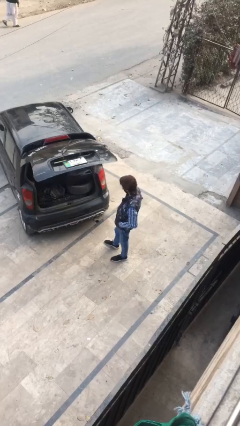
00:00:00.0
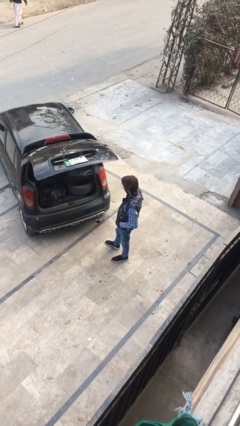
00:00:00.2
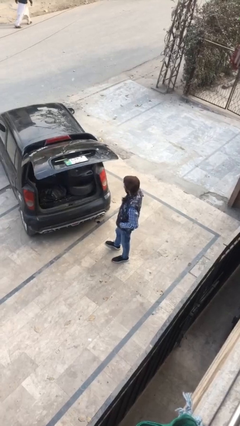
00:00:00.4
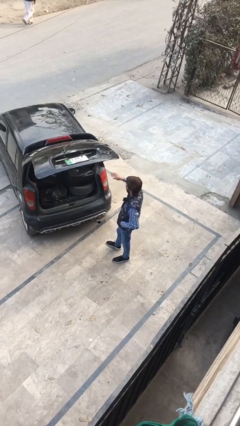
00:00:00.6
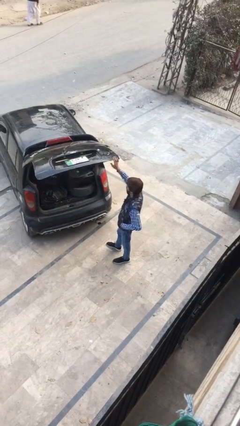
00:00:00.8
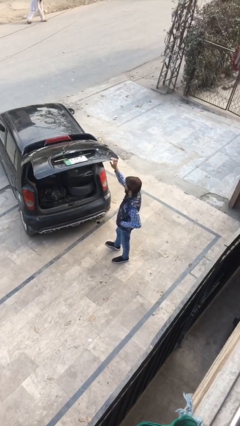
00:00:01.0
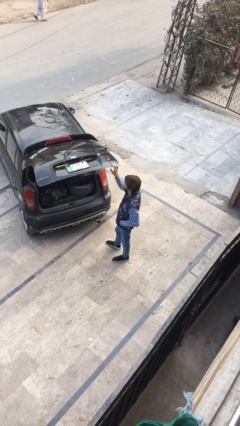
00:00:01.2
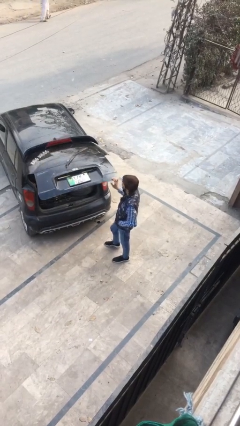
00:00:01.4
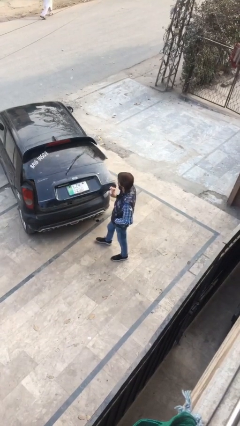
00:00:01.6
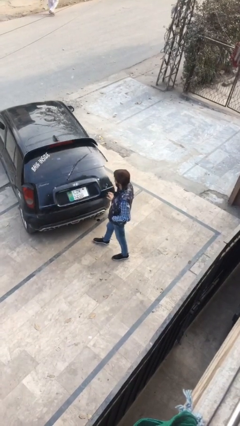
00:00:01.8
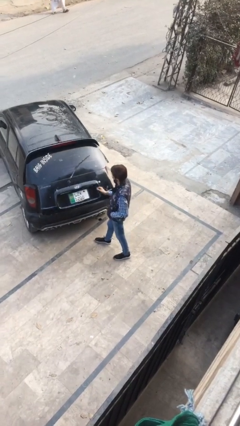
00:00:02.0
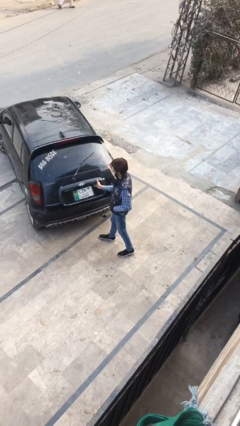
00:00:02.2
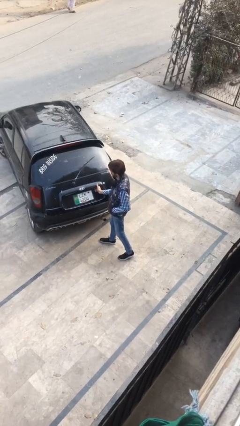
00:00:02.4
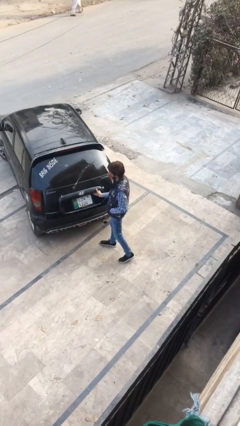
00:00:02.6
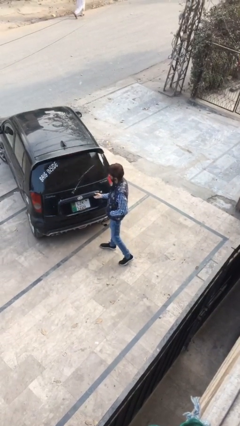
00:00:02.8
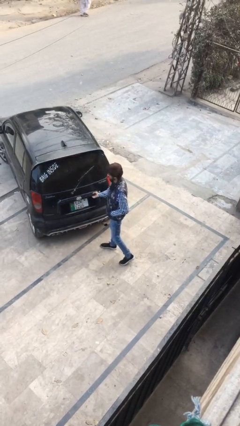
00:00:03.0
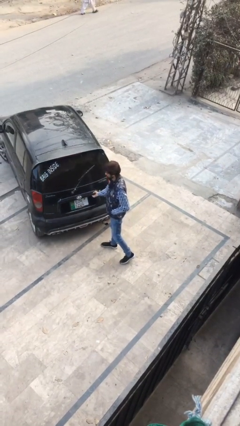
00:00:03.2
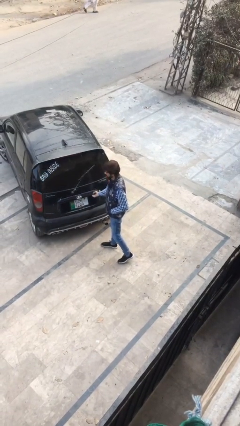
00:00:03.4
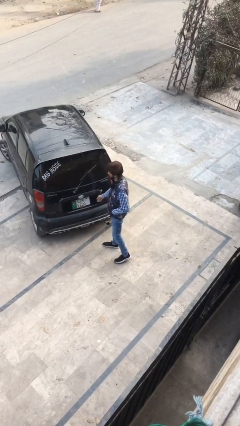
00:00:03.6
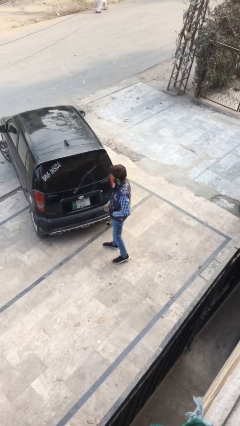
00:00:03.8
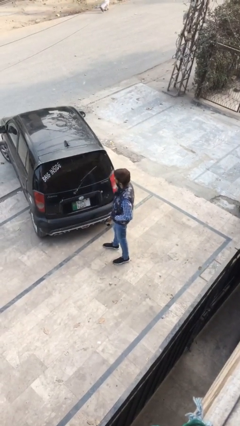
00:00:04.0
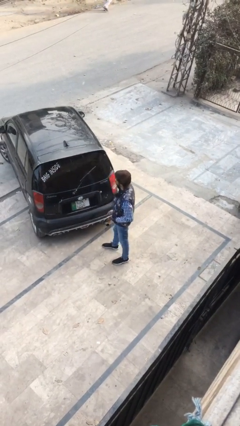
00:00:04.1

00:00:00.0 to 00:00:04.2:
person closes car trunk

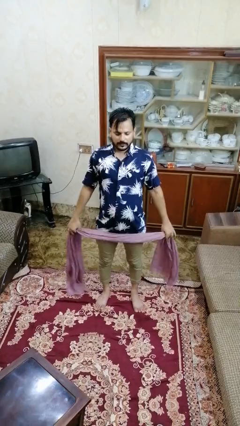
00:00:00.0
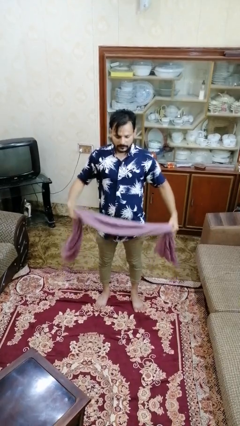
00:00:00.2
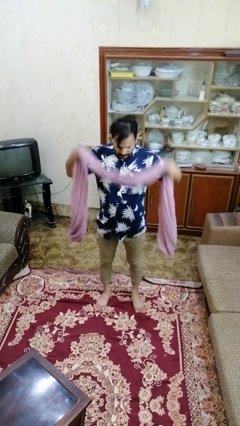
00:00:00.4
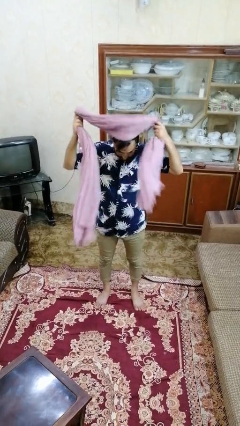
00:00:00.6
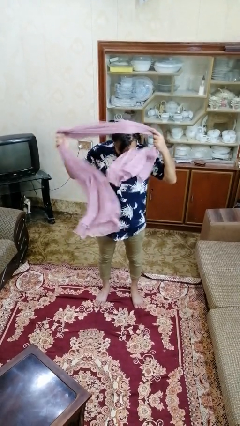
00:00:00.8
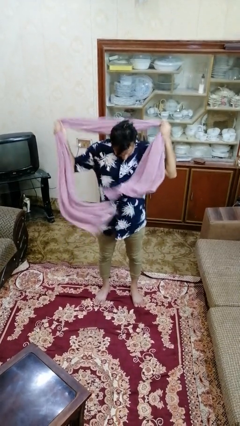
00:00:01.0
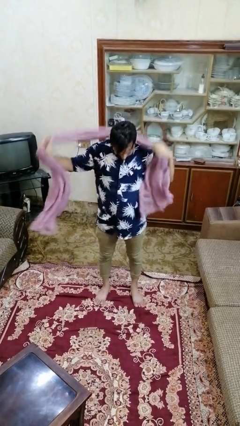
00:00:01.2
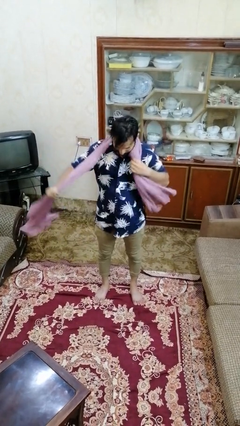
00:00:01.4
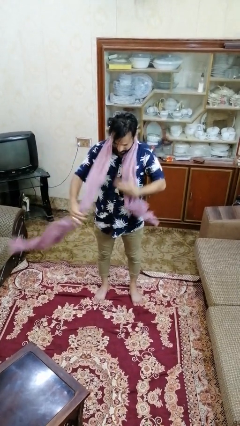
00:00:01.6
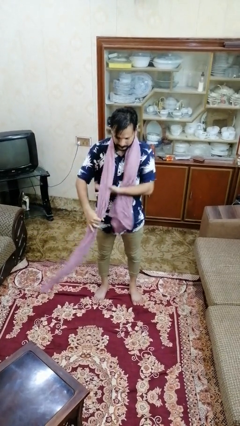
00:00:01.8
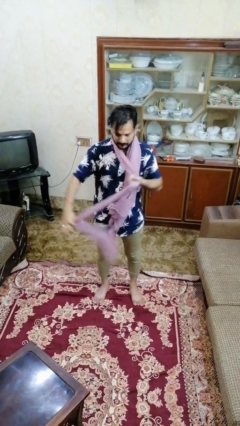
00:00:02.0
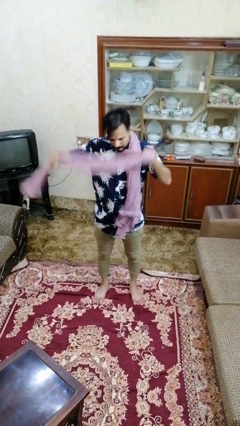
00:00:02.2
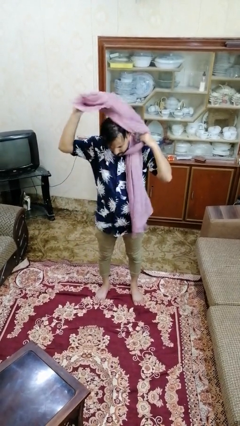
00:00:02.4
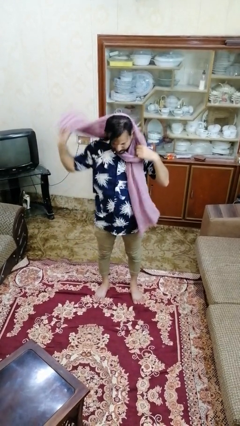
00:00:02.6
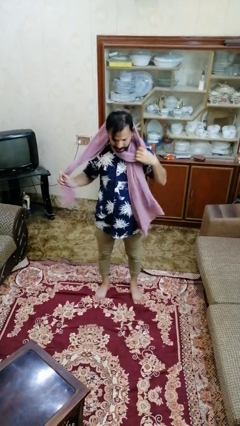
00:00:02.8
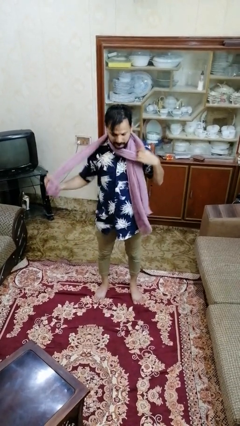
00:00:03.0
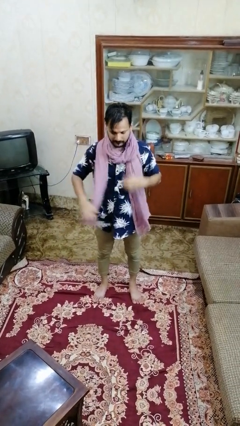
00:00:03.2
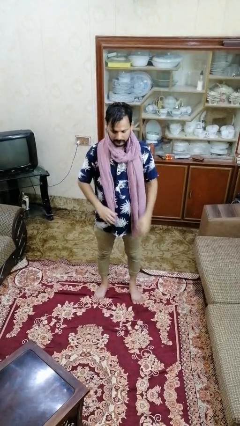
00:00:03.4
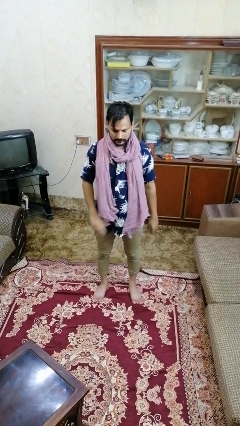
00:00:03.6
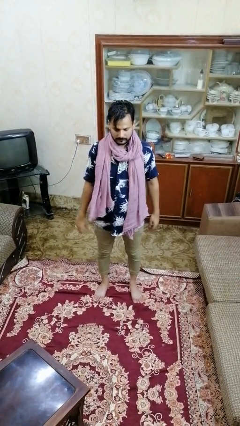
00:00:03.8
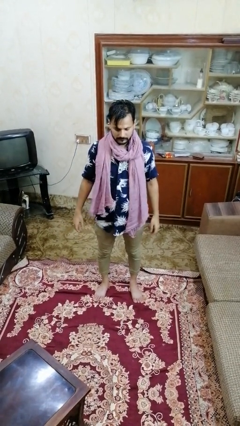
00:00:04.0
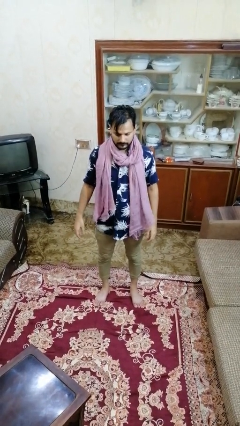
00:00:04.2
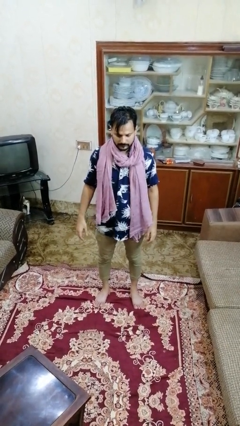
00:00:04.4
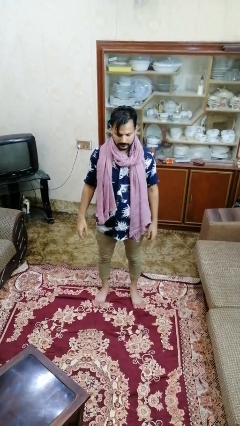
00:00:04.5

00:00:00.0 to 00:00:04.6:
person puts on scarf

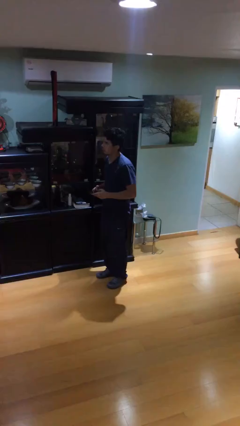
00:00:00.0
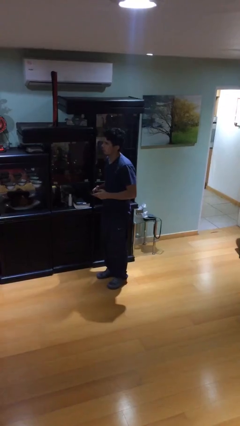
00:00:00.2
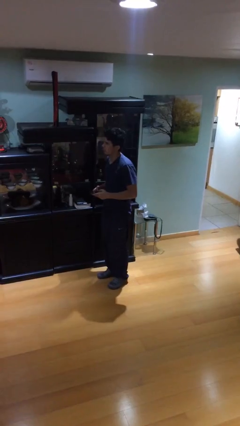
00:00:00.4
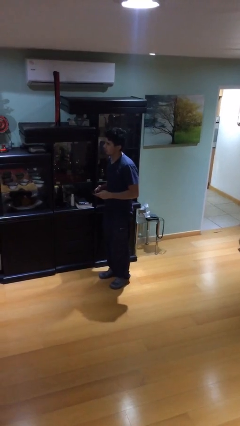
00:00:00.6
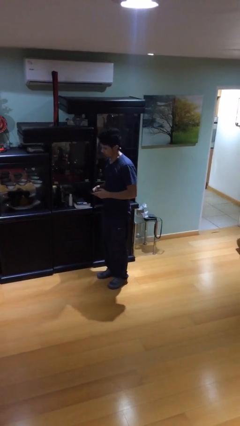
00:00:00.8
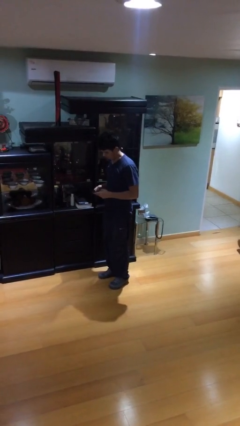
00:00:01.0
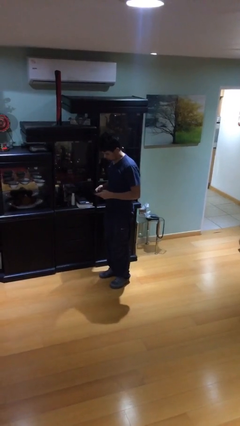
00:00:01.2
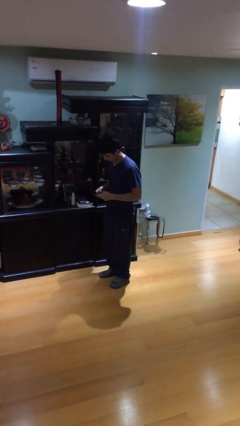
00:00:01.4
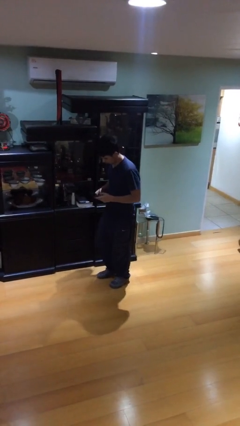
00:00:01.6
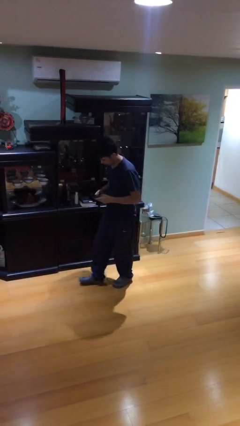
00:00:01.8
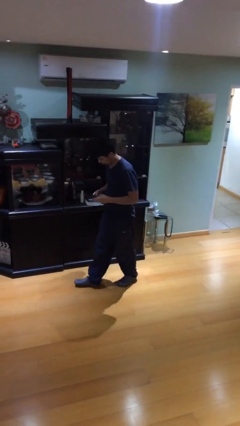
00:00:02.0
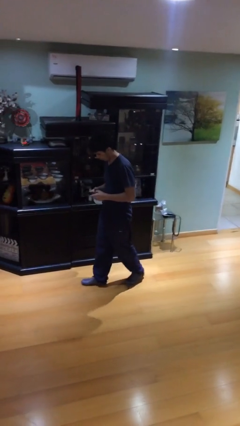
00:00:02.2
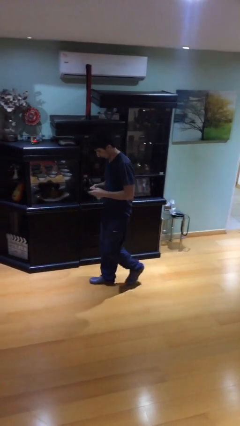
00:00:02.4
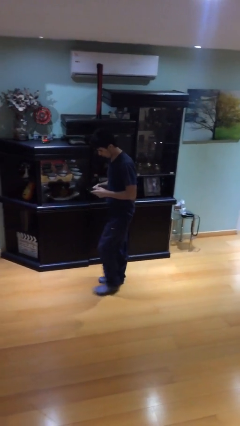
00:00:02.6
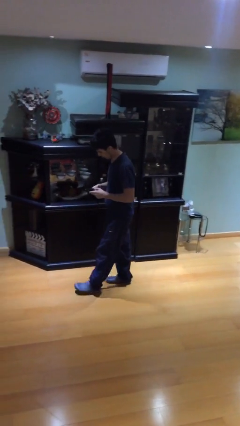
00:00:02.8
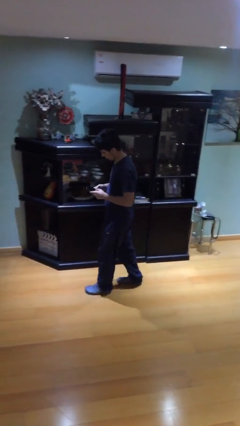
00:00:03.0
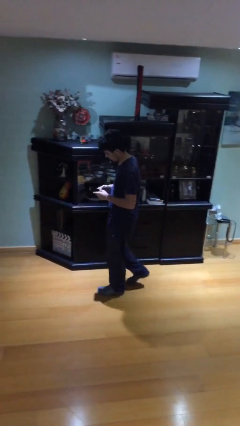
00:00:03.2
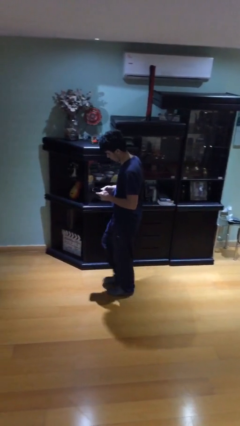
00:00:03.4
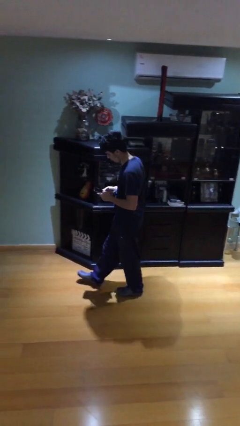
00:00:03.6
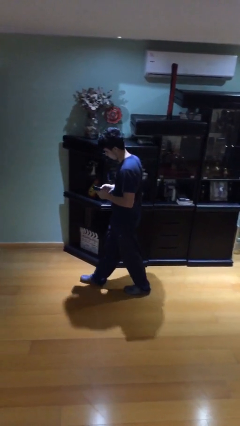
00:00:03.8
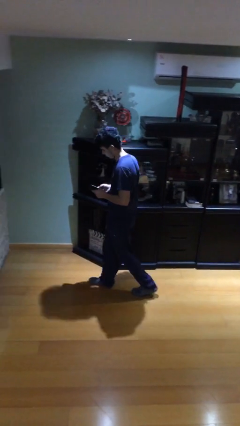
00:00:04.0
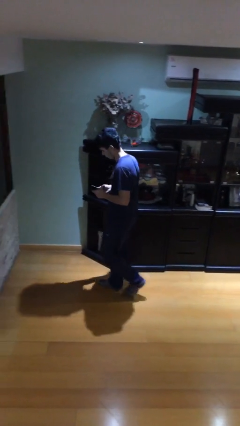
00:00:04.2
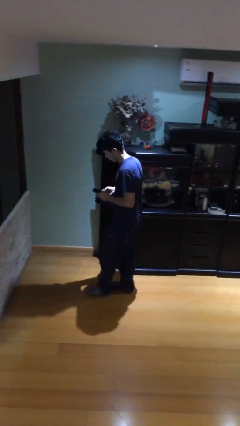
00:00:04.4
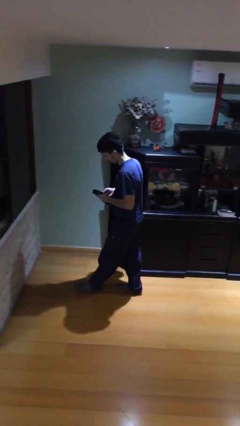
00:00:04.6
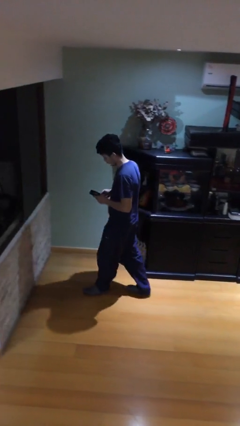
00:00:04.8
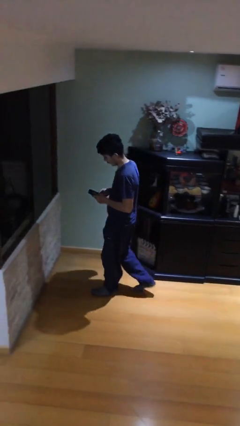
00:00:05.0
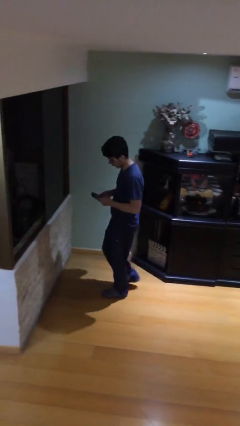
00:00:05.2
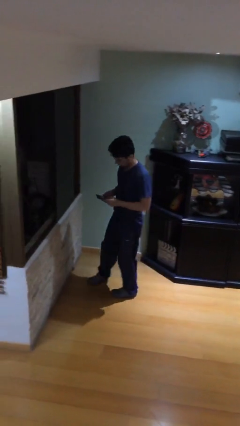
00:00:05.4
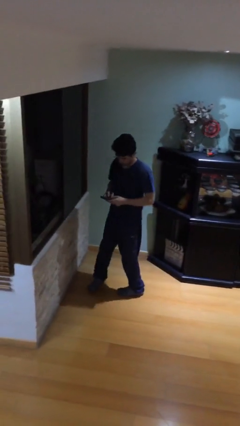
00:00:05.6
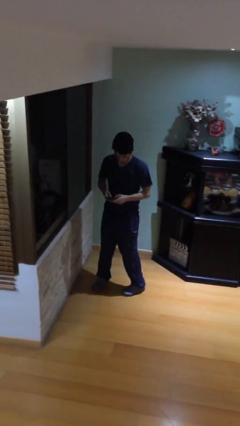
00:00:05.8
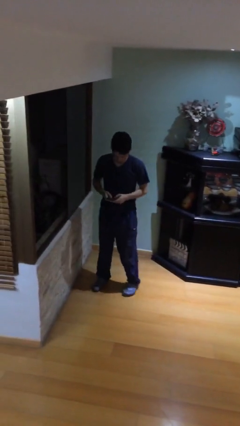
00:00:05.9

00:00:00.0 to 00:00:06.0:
person texts on phone

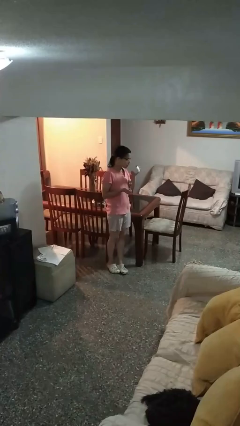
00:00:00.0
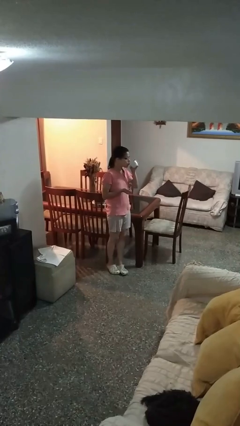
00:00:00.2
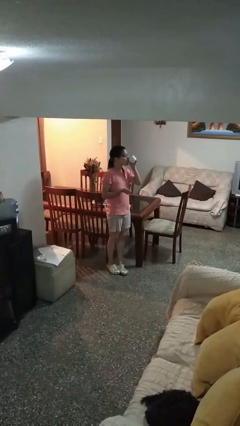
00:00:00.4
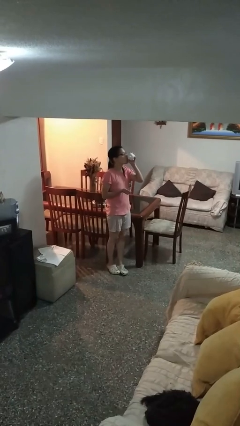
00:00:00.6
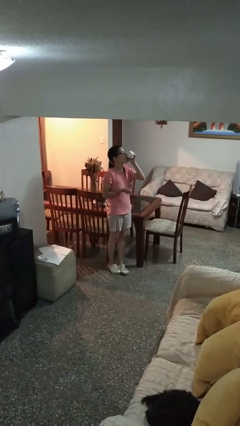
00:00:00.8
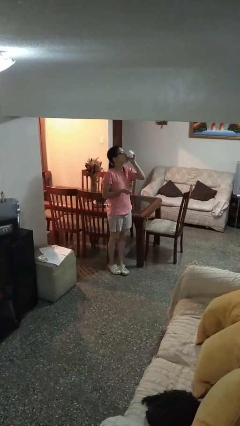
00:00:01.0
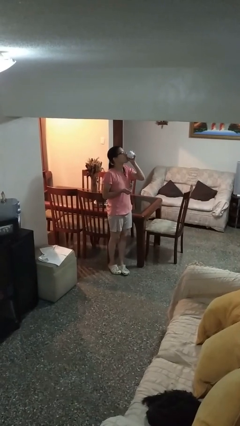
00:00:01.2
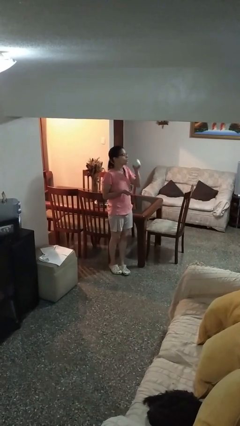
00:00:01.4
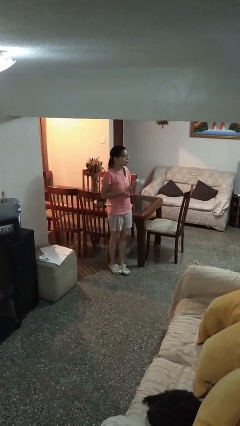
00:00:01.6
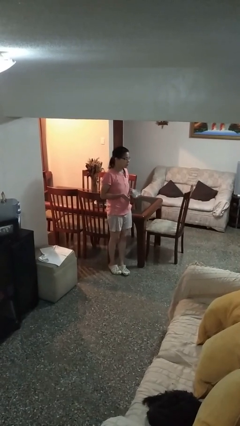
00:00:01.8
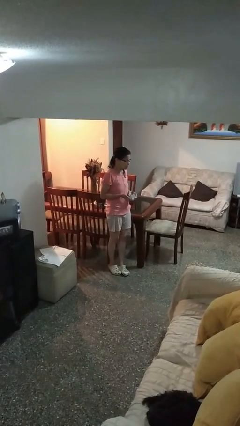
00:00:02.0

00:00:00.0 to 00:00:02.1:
person drinks from mug

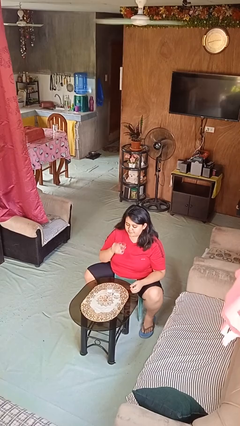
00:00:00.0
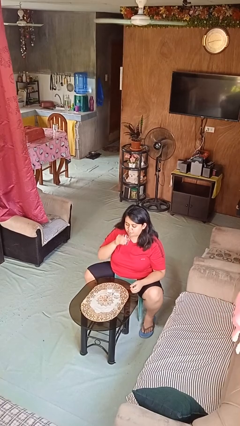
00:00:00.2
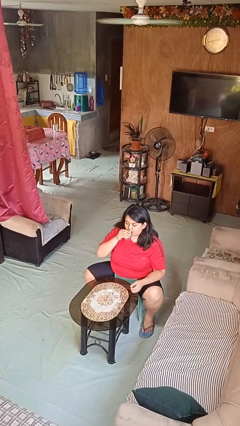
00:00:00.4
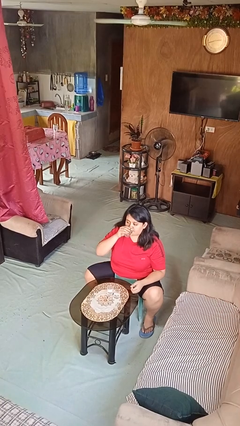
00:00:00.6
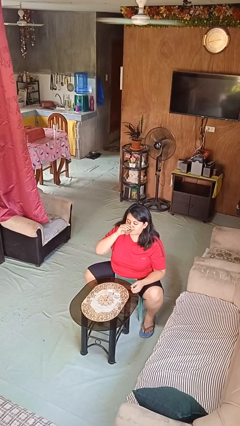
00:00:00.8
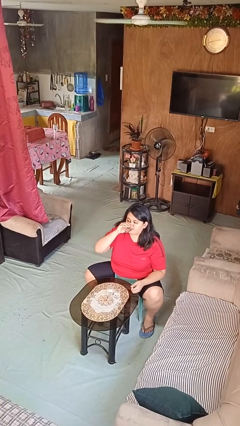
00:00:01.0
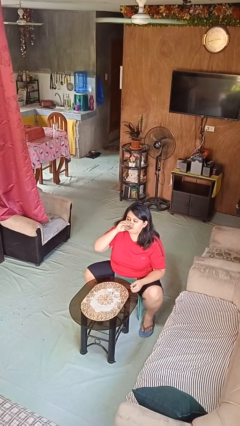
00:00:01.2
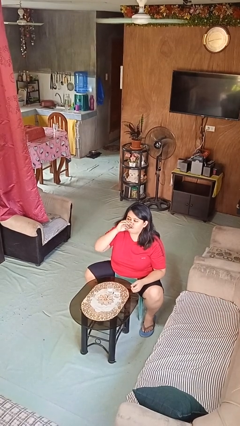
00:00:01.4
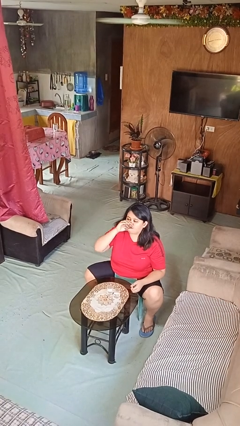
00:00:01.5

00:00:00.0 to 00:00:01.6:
person drinks from shotglass
